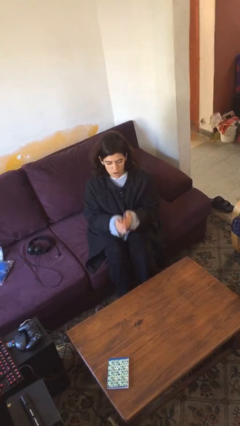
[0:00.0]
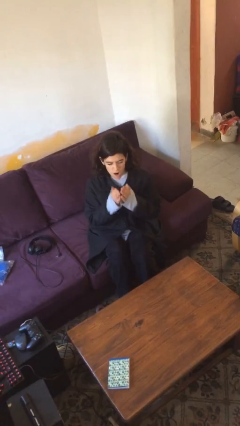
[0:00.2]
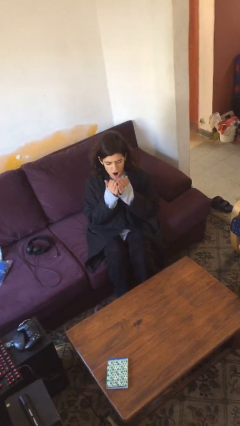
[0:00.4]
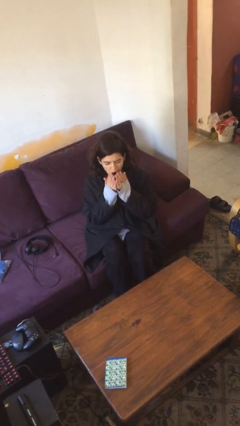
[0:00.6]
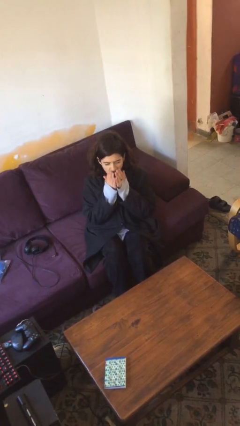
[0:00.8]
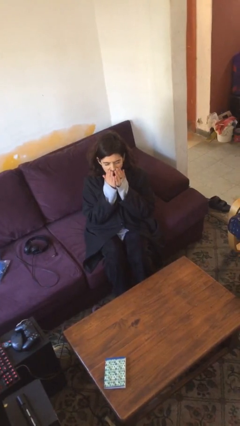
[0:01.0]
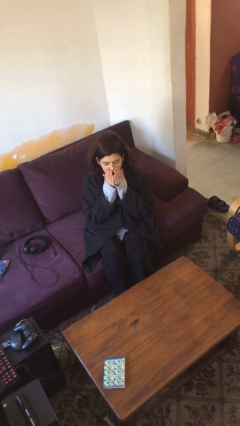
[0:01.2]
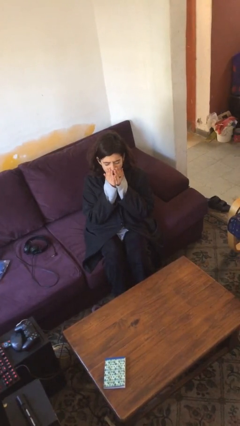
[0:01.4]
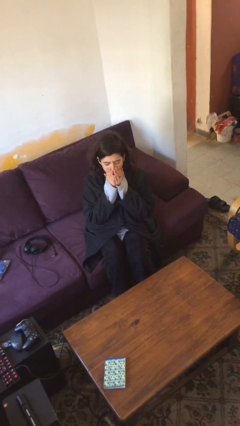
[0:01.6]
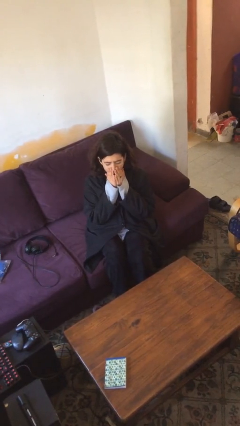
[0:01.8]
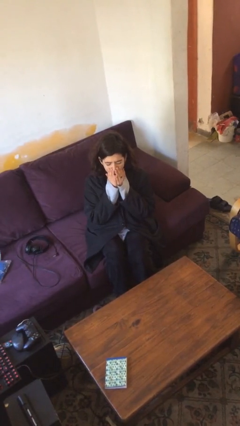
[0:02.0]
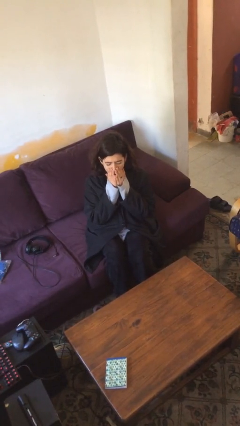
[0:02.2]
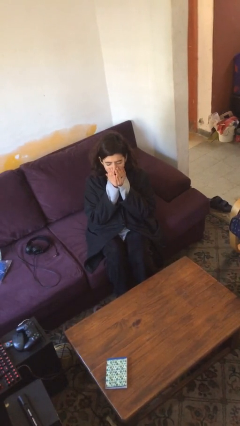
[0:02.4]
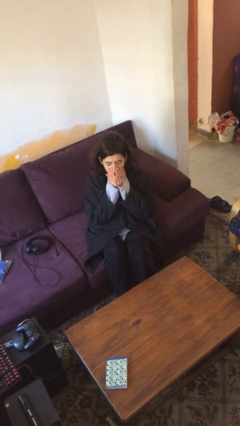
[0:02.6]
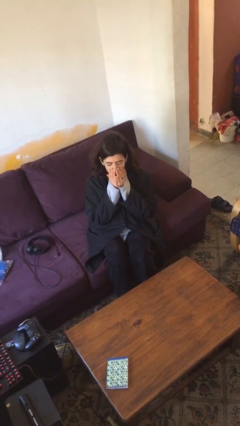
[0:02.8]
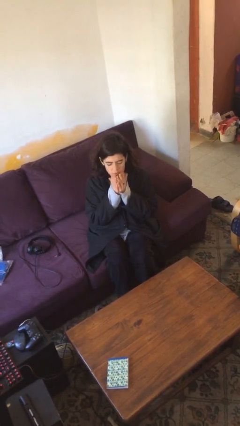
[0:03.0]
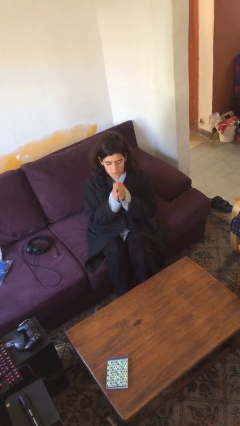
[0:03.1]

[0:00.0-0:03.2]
person yawns

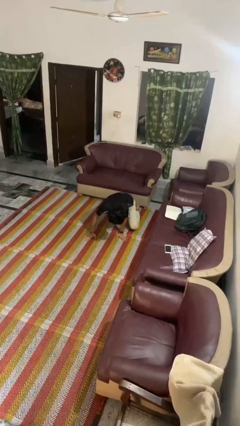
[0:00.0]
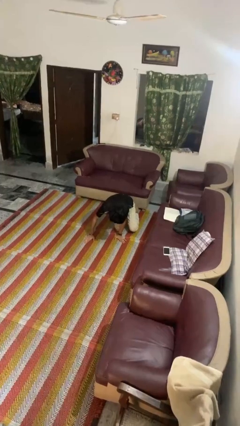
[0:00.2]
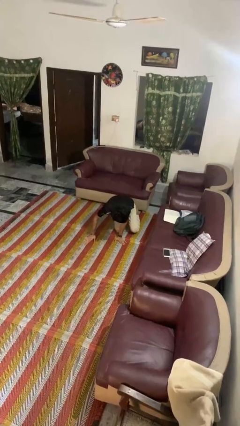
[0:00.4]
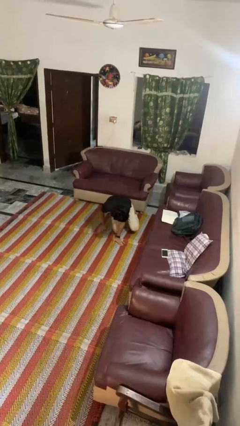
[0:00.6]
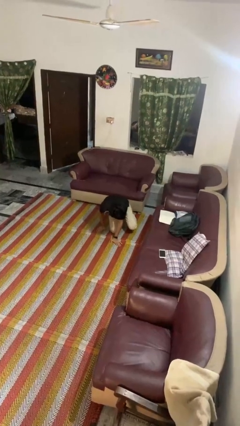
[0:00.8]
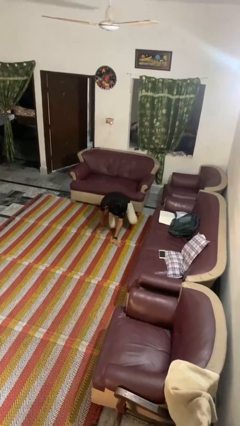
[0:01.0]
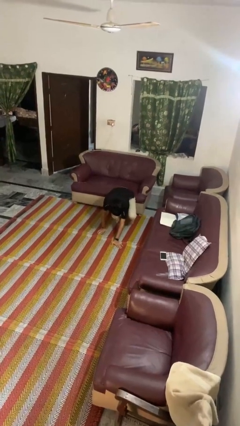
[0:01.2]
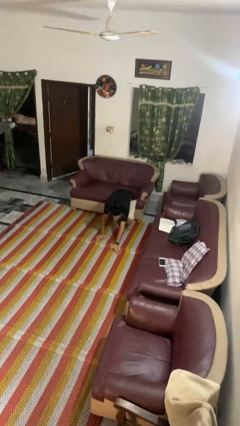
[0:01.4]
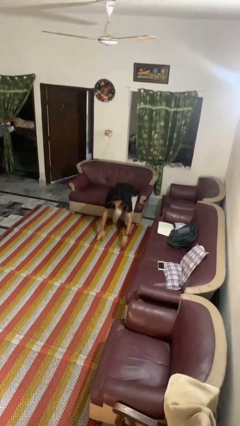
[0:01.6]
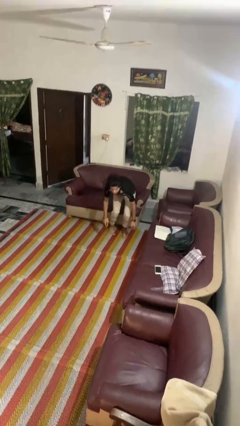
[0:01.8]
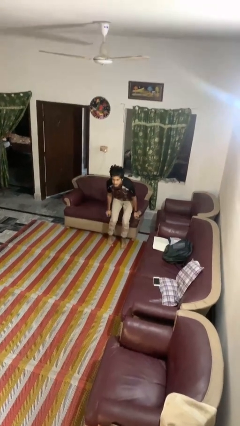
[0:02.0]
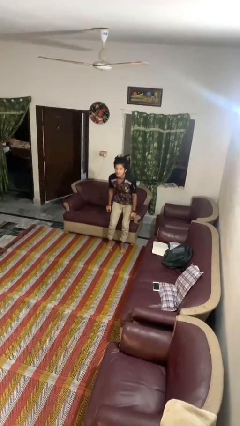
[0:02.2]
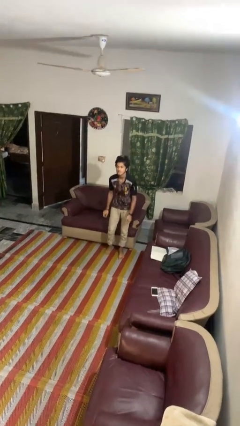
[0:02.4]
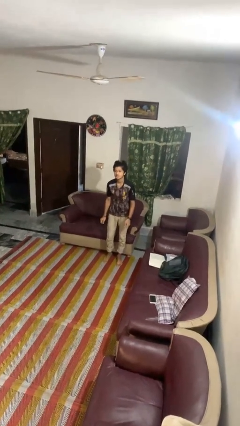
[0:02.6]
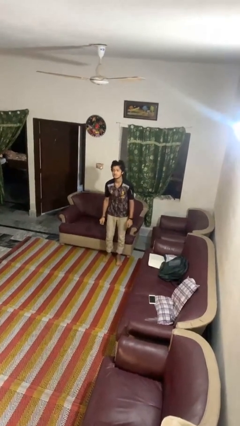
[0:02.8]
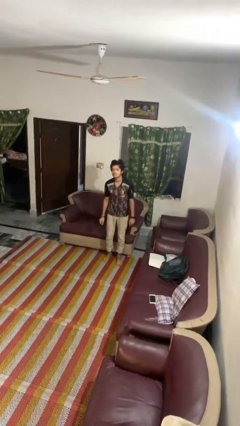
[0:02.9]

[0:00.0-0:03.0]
person stands up from floor

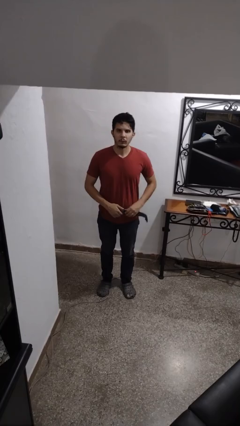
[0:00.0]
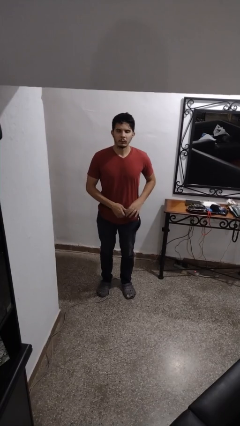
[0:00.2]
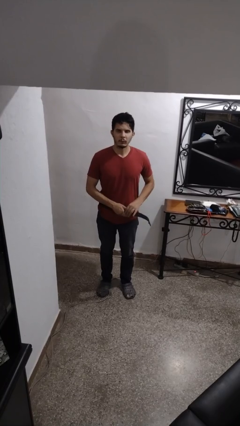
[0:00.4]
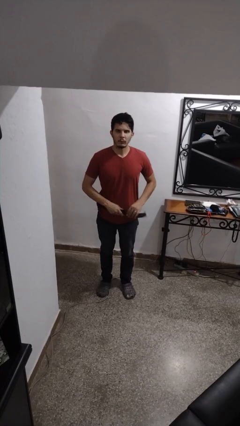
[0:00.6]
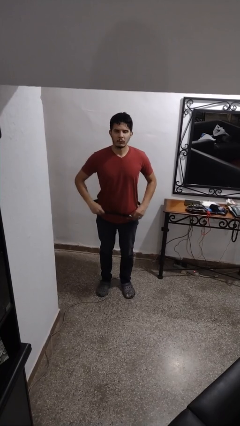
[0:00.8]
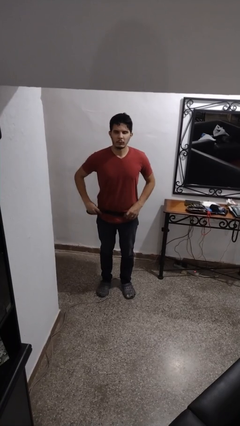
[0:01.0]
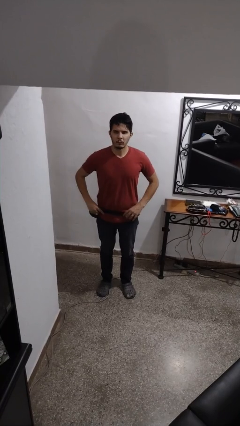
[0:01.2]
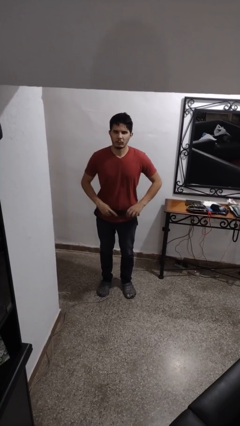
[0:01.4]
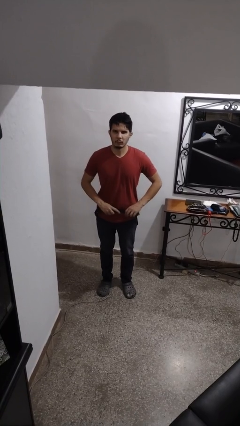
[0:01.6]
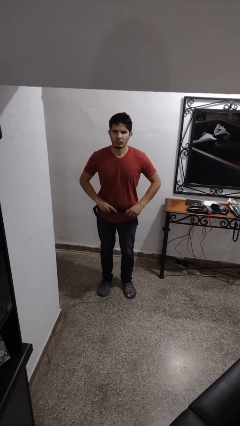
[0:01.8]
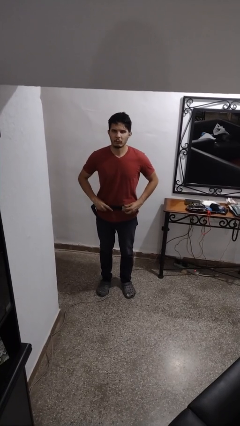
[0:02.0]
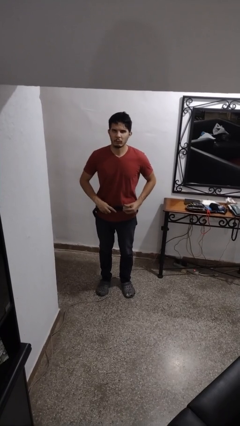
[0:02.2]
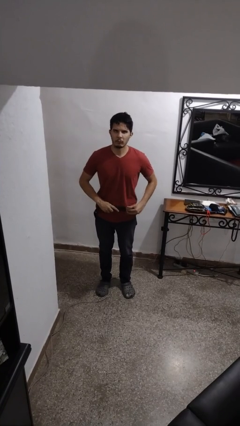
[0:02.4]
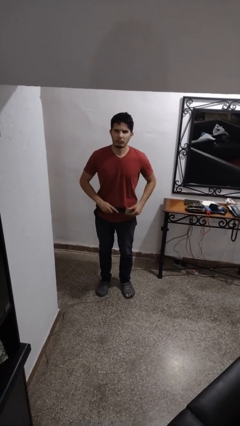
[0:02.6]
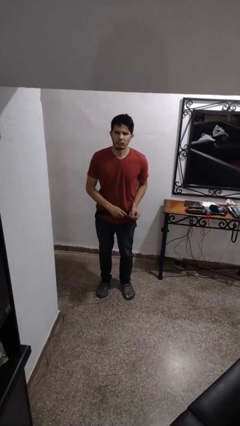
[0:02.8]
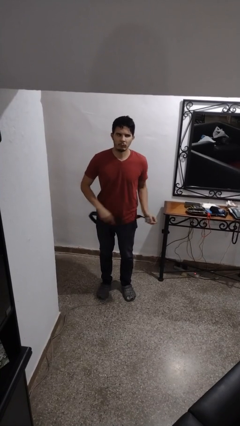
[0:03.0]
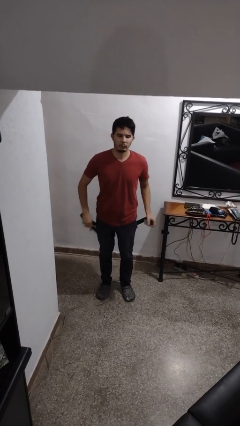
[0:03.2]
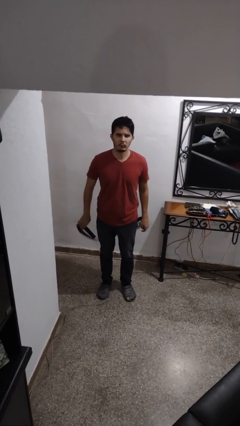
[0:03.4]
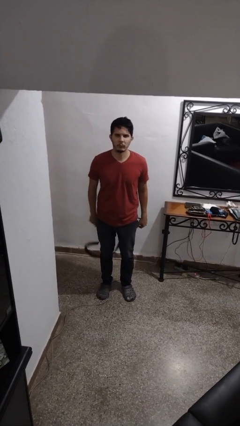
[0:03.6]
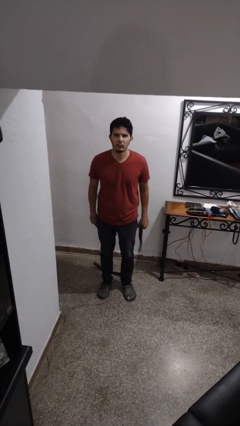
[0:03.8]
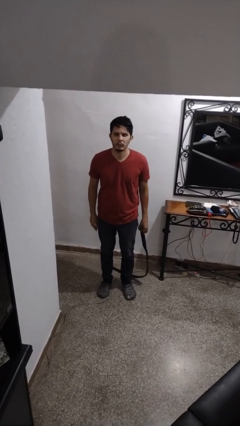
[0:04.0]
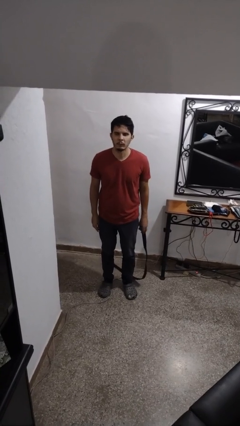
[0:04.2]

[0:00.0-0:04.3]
person takes off belt

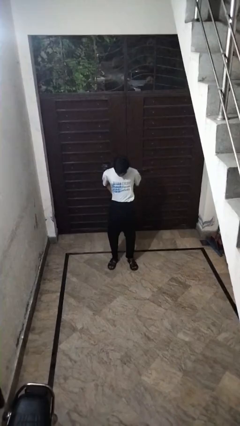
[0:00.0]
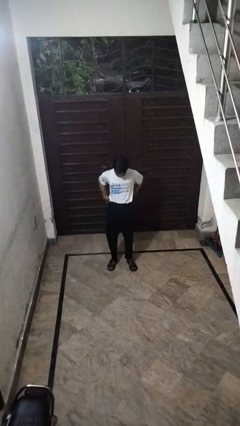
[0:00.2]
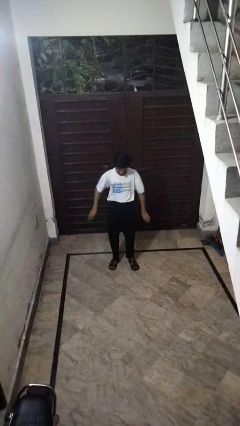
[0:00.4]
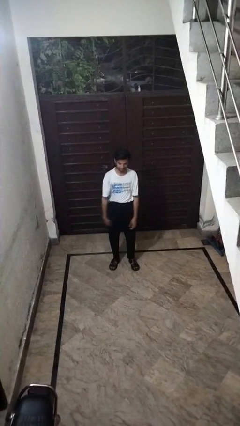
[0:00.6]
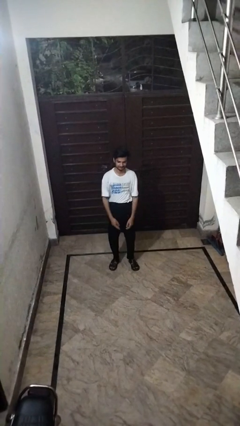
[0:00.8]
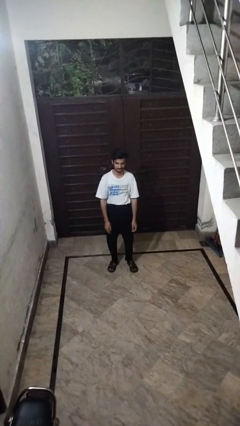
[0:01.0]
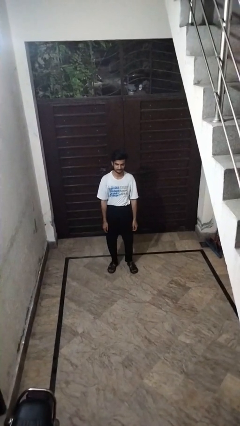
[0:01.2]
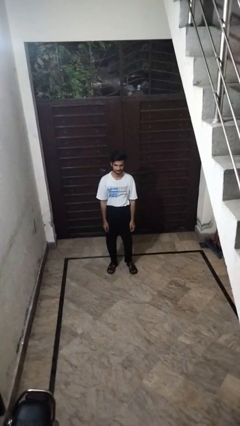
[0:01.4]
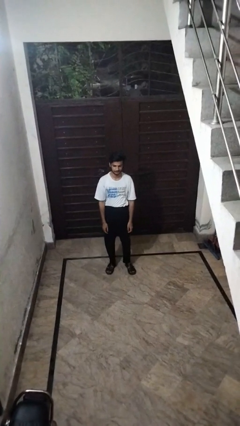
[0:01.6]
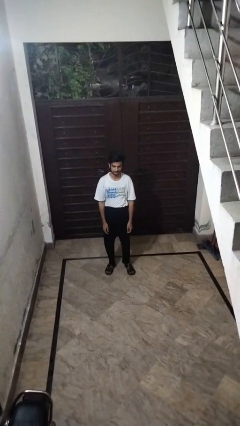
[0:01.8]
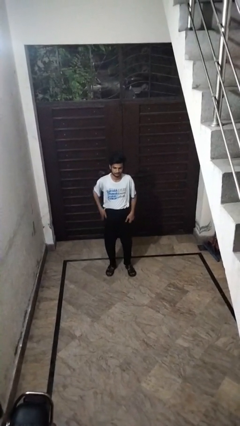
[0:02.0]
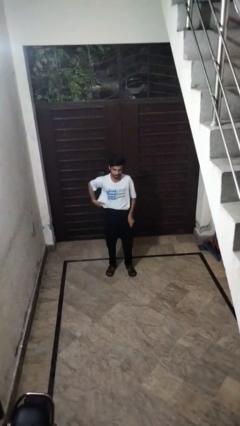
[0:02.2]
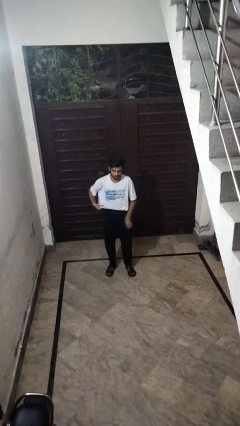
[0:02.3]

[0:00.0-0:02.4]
person unlocks door with keys

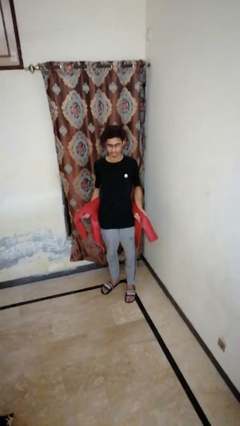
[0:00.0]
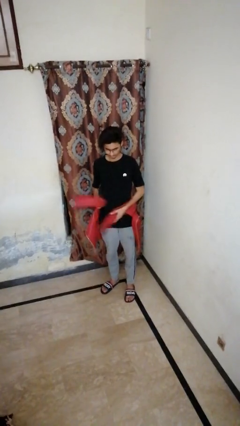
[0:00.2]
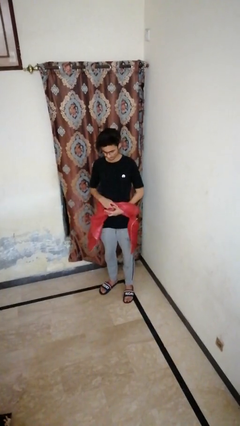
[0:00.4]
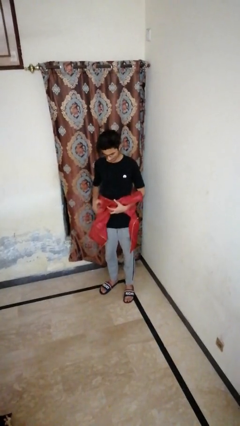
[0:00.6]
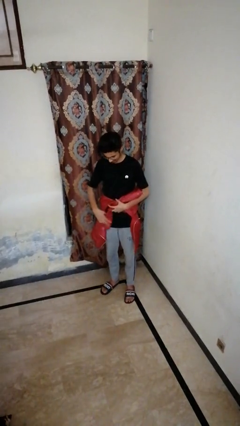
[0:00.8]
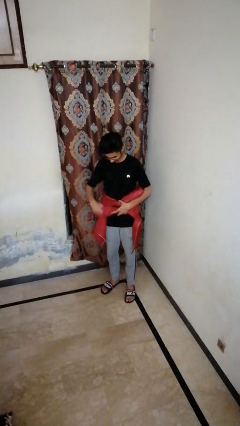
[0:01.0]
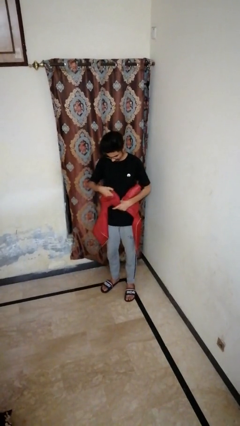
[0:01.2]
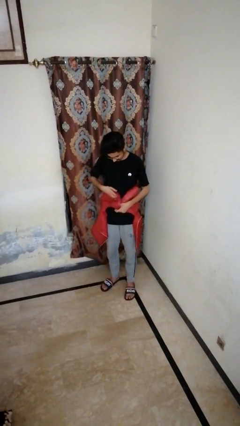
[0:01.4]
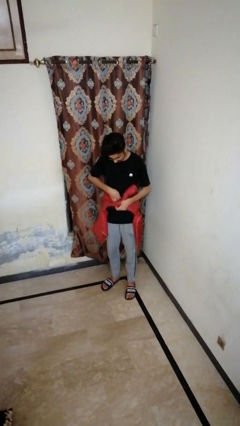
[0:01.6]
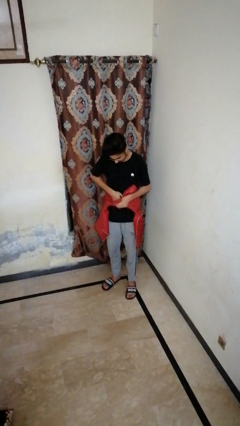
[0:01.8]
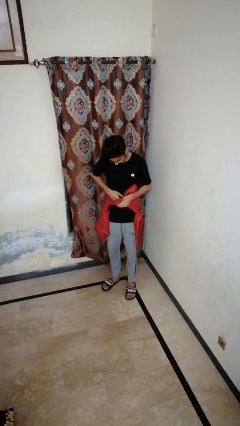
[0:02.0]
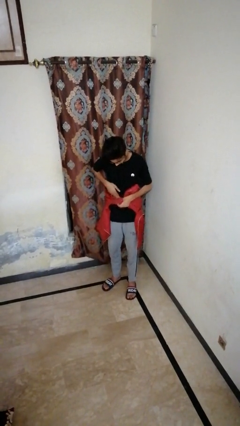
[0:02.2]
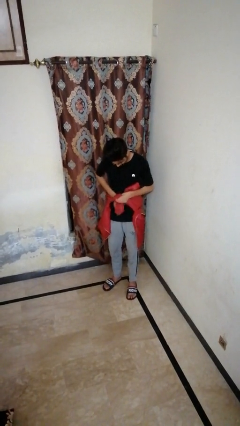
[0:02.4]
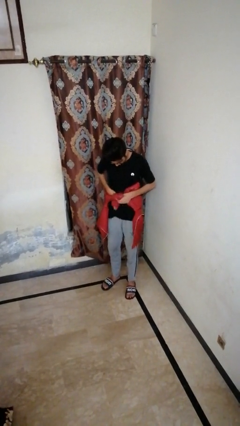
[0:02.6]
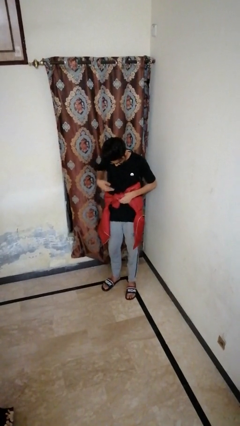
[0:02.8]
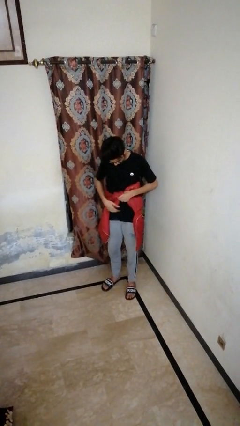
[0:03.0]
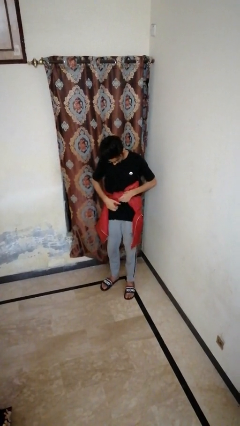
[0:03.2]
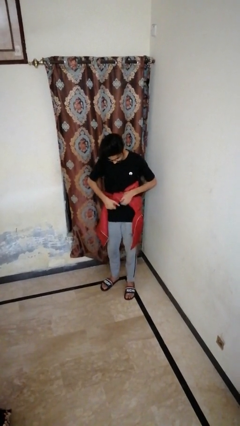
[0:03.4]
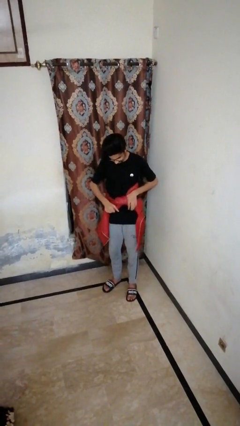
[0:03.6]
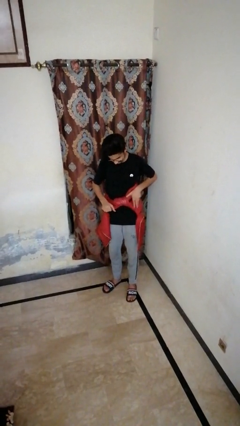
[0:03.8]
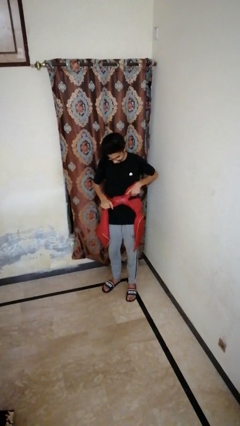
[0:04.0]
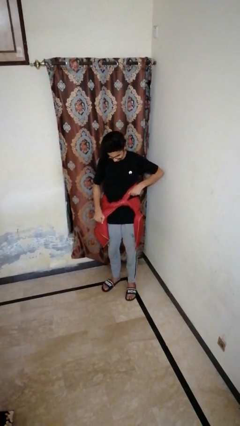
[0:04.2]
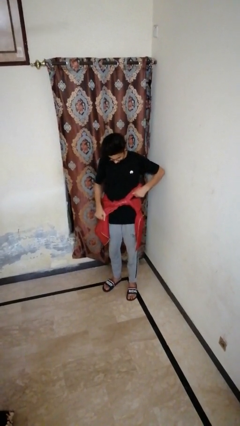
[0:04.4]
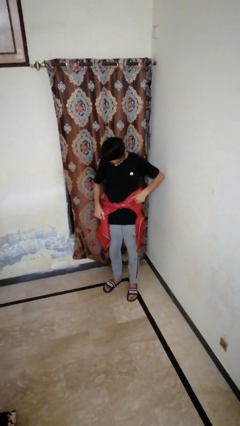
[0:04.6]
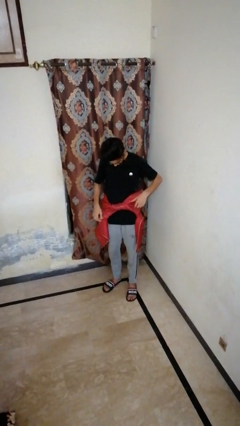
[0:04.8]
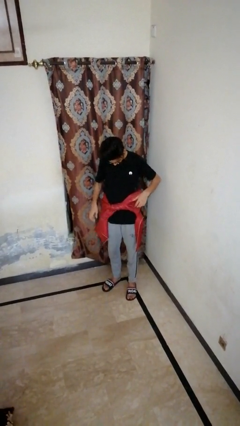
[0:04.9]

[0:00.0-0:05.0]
person ties jacket around waist
